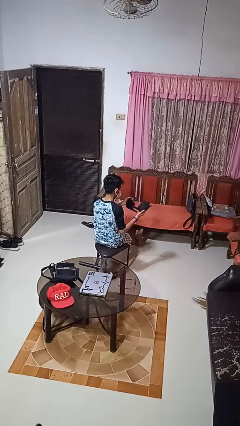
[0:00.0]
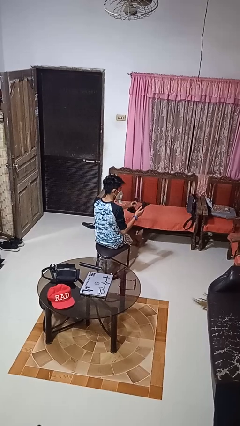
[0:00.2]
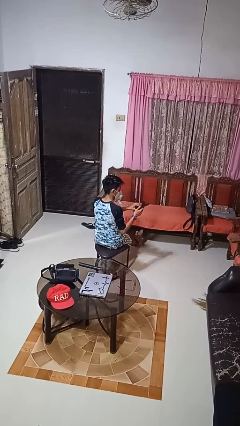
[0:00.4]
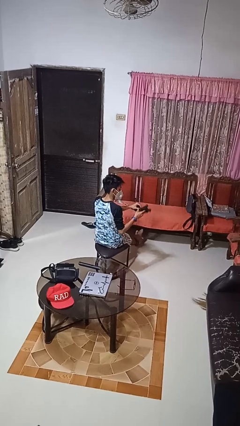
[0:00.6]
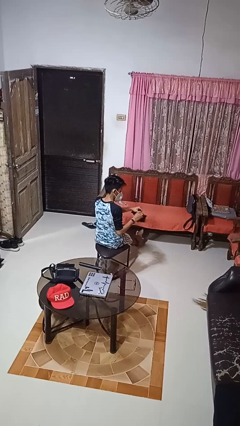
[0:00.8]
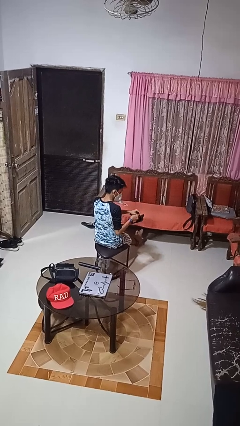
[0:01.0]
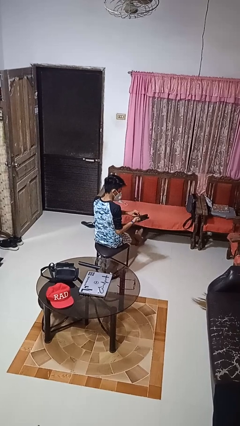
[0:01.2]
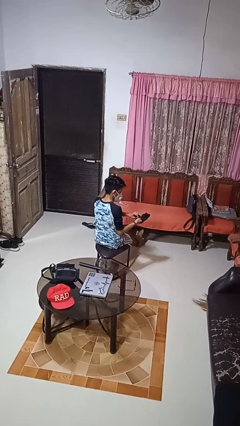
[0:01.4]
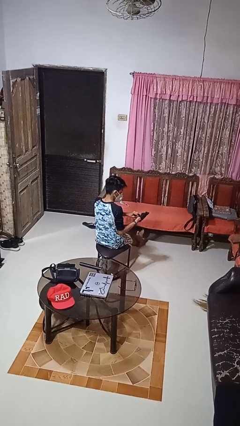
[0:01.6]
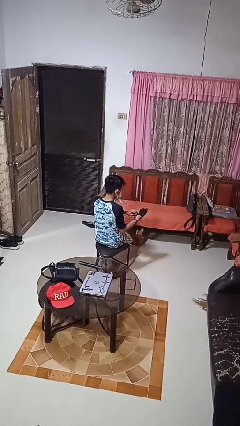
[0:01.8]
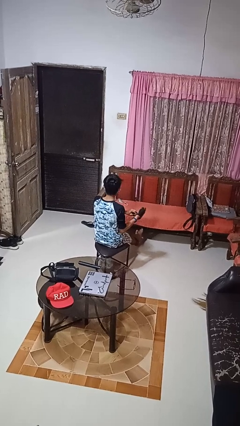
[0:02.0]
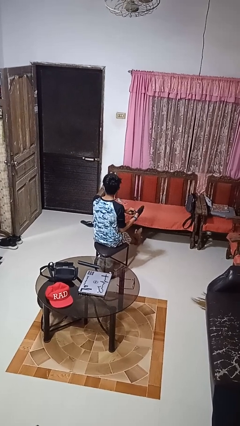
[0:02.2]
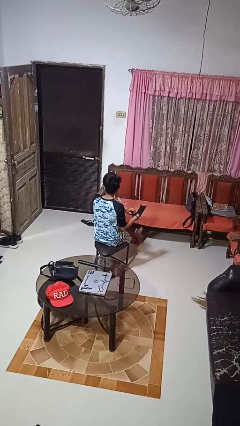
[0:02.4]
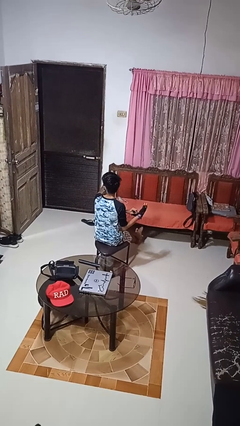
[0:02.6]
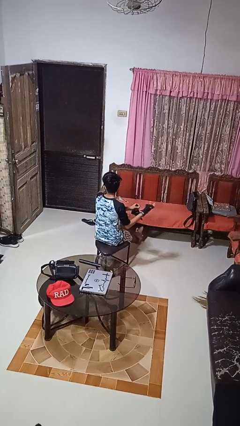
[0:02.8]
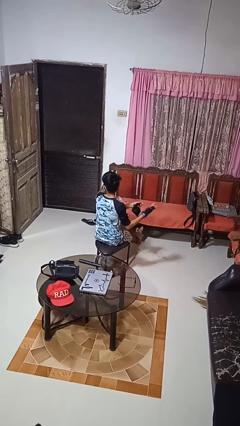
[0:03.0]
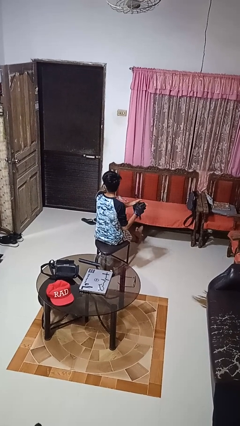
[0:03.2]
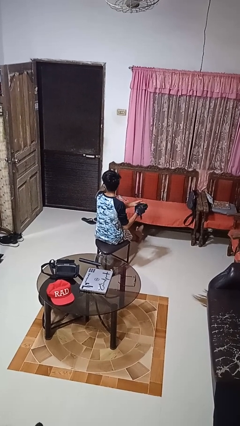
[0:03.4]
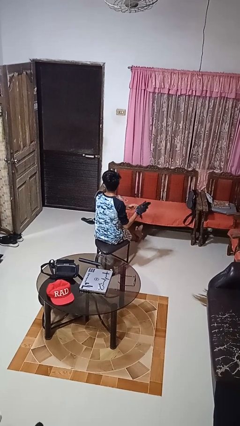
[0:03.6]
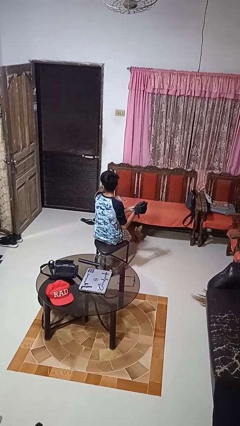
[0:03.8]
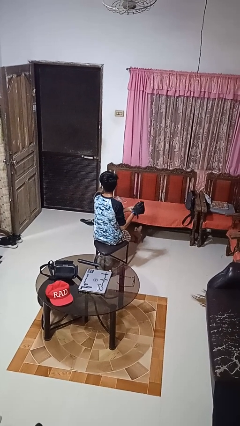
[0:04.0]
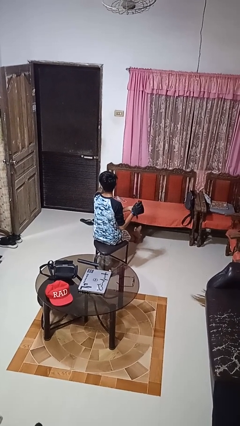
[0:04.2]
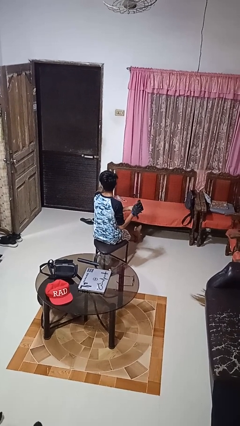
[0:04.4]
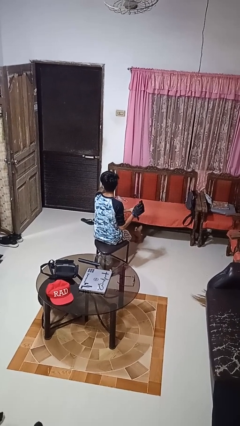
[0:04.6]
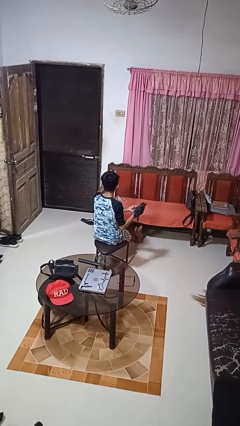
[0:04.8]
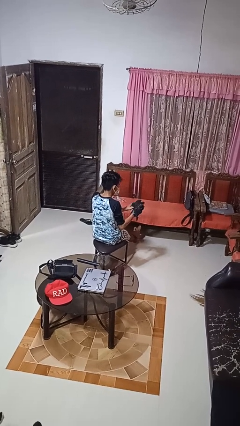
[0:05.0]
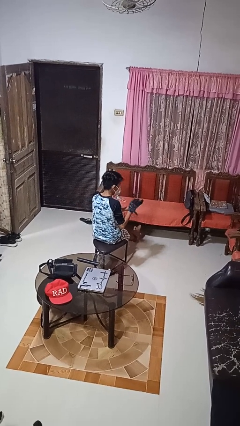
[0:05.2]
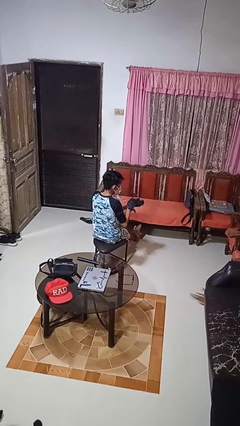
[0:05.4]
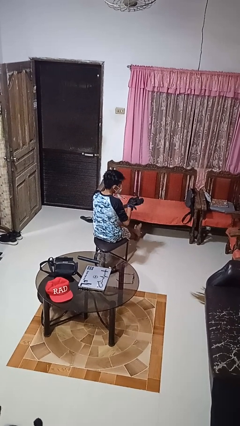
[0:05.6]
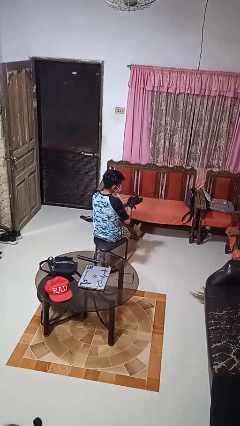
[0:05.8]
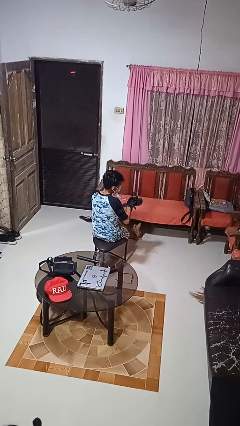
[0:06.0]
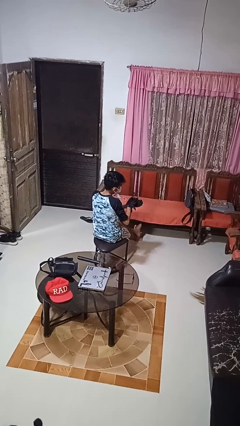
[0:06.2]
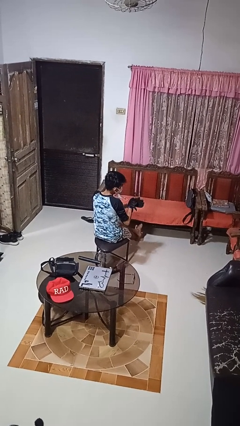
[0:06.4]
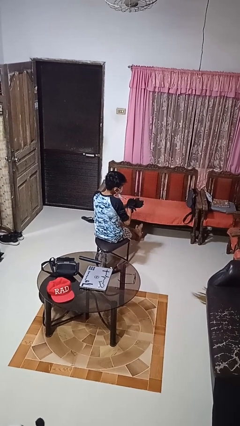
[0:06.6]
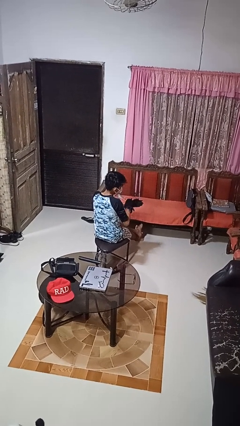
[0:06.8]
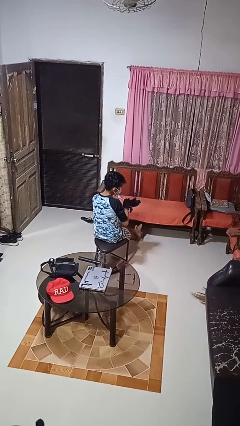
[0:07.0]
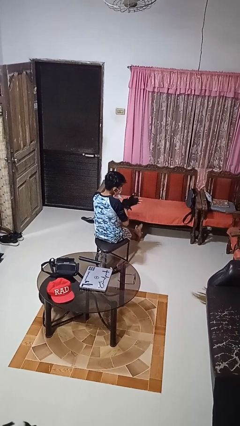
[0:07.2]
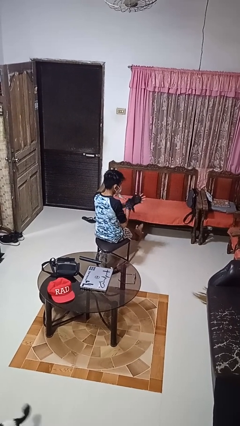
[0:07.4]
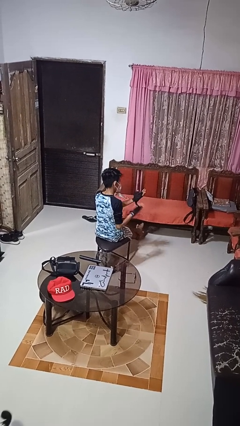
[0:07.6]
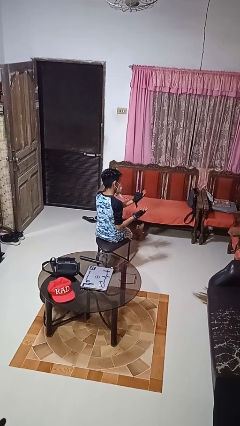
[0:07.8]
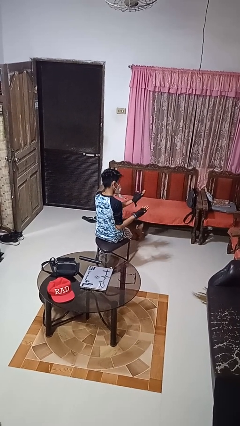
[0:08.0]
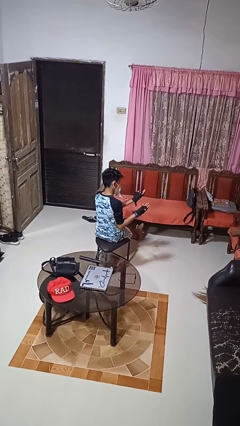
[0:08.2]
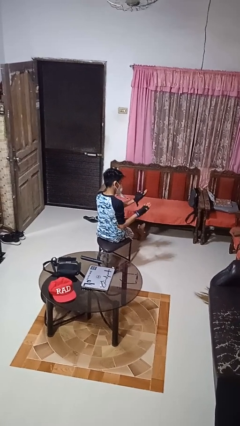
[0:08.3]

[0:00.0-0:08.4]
person puts on gloves

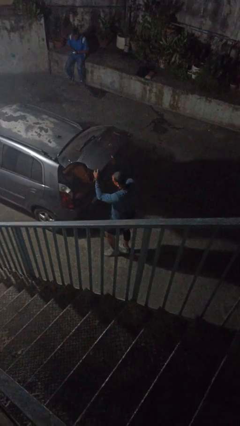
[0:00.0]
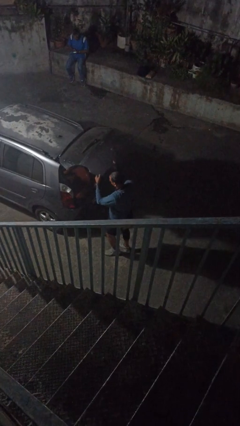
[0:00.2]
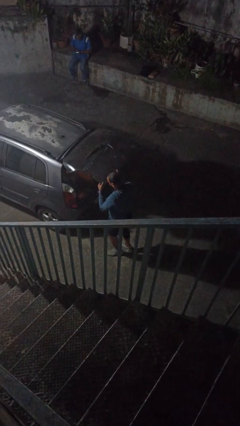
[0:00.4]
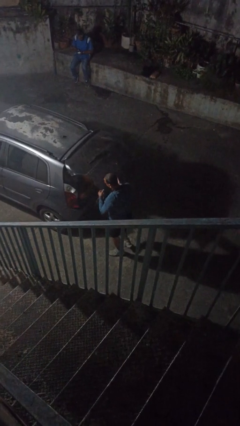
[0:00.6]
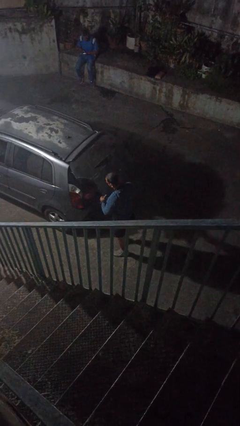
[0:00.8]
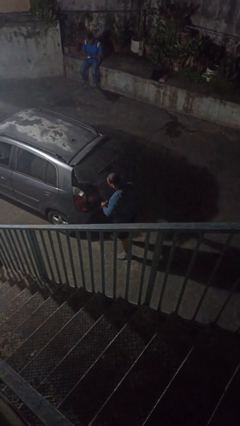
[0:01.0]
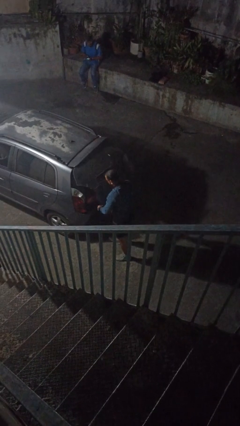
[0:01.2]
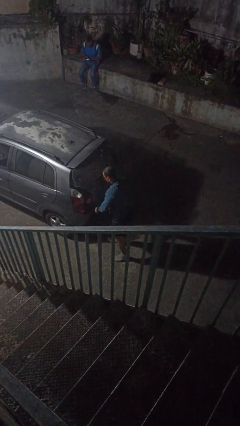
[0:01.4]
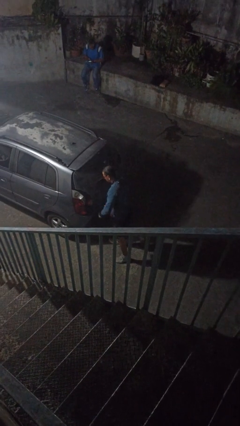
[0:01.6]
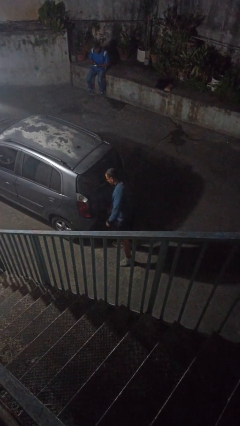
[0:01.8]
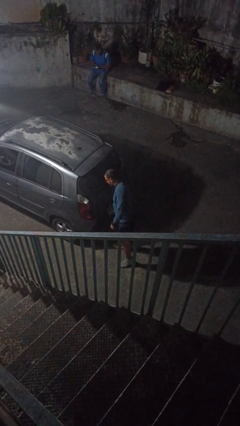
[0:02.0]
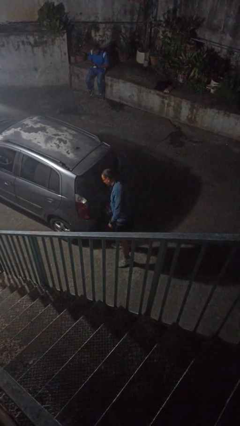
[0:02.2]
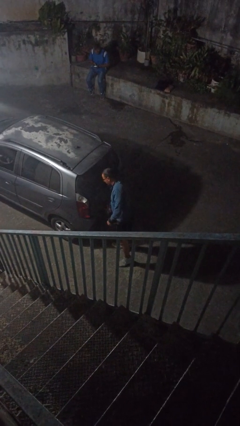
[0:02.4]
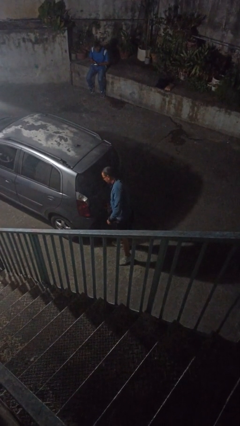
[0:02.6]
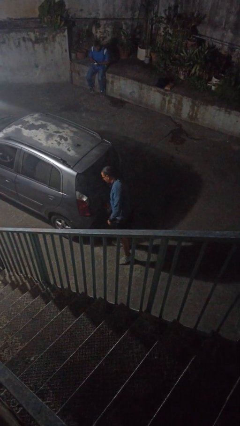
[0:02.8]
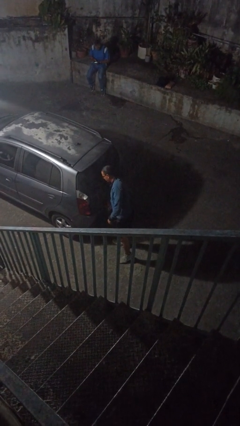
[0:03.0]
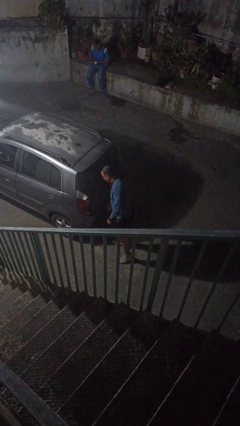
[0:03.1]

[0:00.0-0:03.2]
person closes car trunk

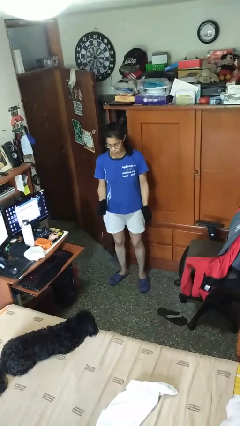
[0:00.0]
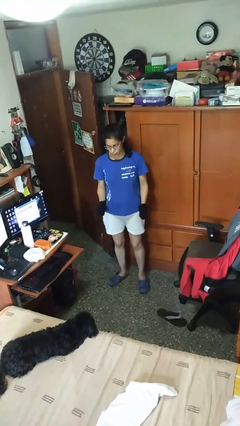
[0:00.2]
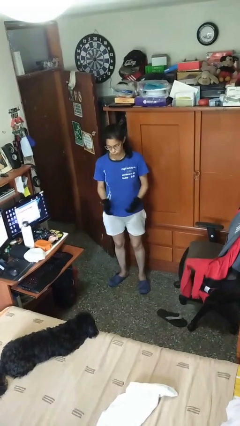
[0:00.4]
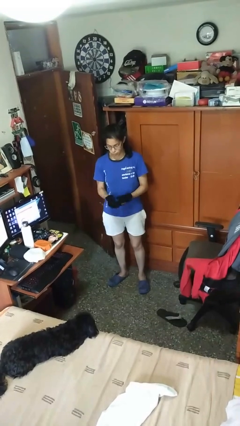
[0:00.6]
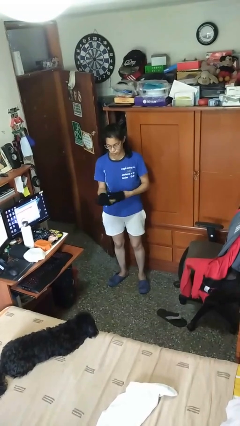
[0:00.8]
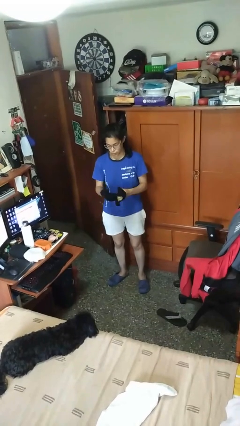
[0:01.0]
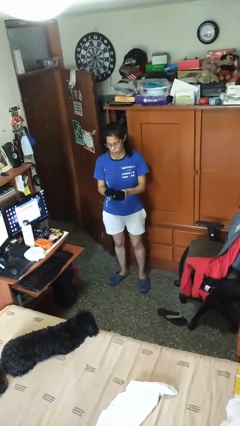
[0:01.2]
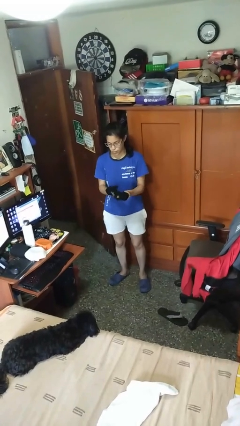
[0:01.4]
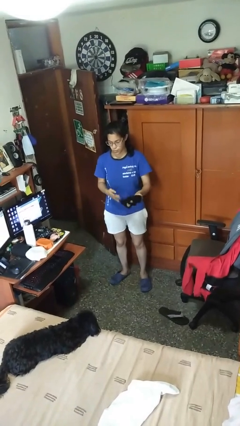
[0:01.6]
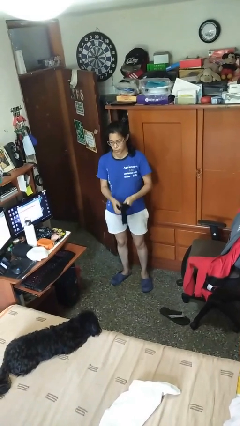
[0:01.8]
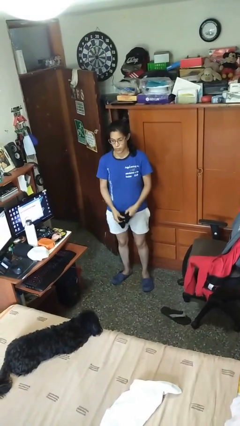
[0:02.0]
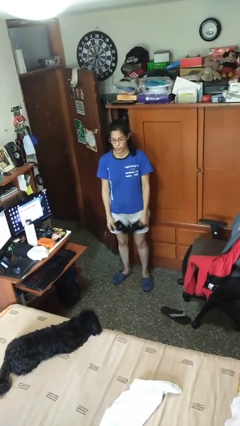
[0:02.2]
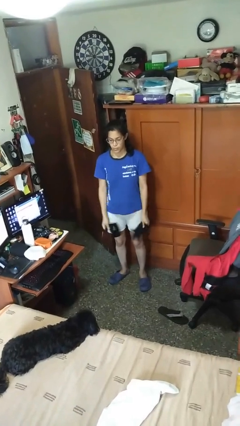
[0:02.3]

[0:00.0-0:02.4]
person takes off gloves

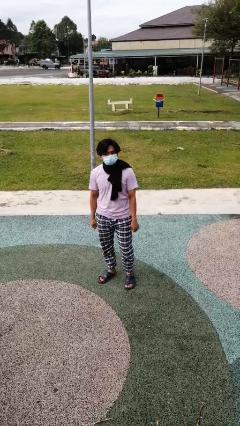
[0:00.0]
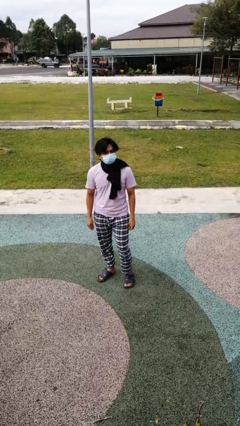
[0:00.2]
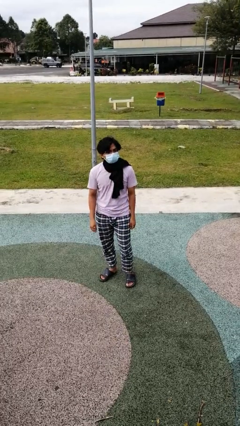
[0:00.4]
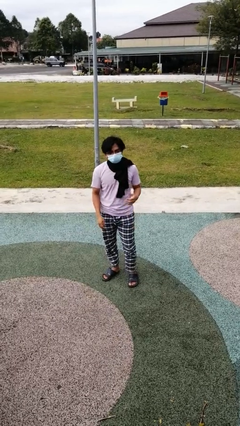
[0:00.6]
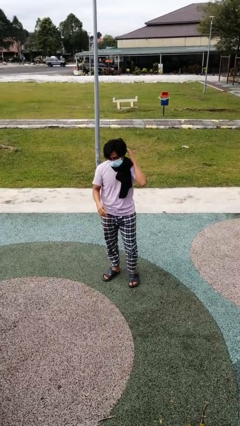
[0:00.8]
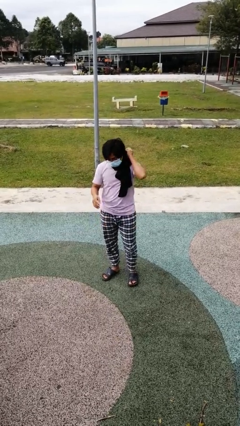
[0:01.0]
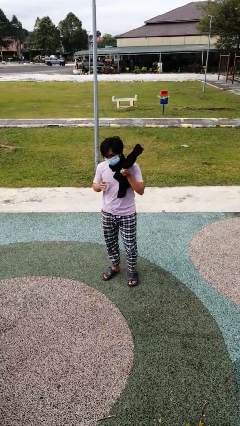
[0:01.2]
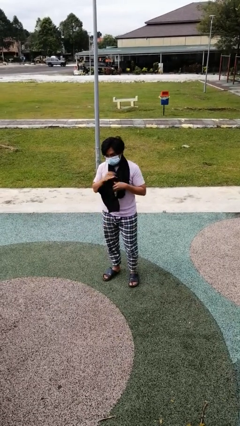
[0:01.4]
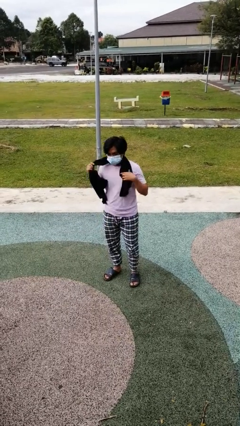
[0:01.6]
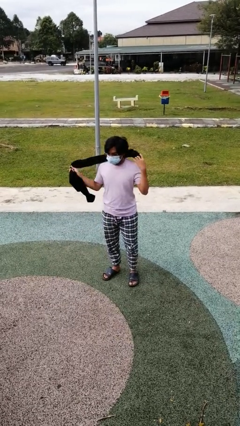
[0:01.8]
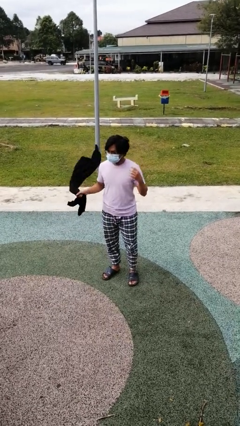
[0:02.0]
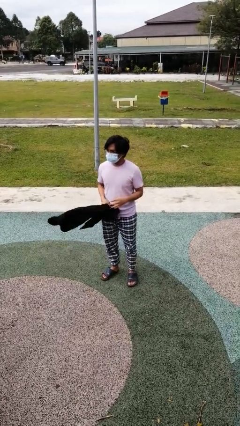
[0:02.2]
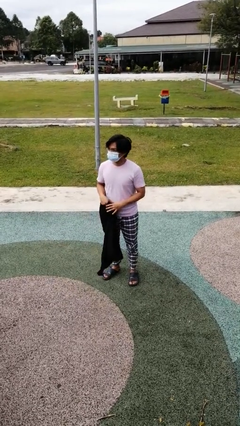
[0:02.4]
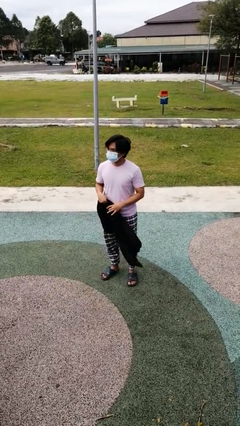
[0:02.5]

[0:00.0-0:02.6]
person takes off scarf

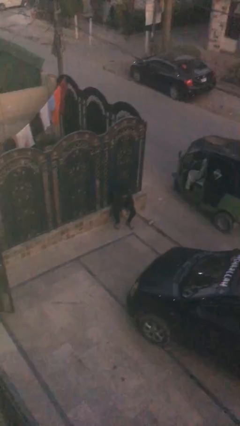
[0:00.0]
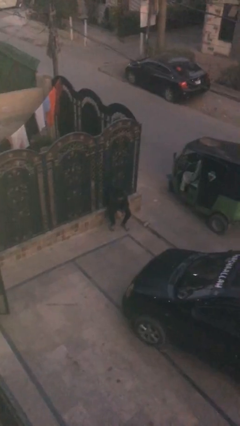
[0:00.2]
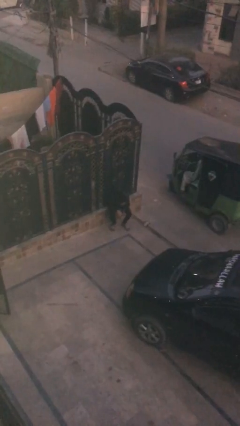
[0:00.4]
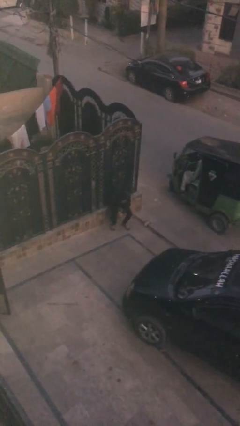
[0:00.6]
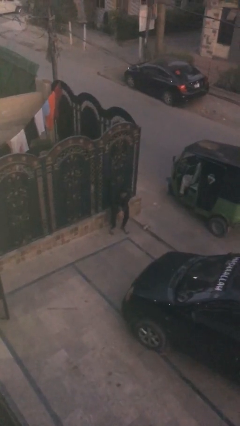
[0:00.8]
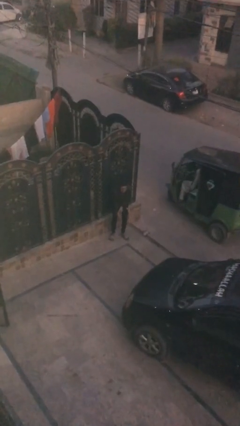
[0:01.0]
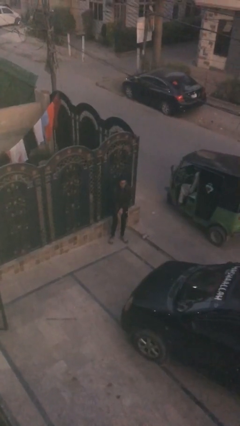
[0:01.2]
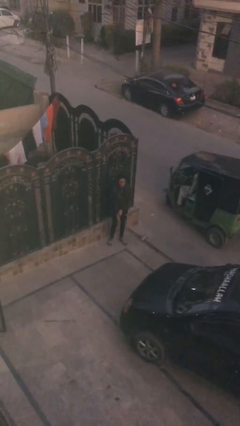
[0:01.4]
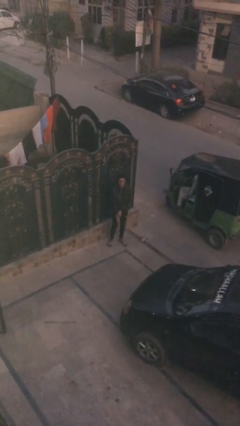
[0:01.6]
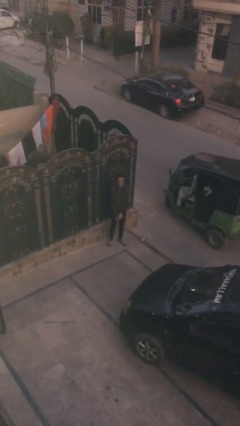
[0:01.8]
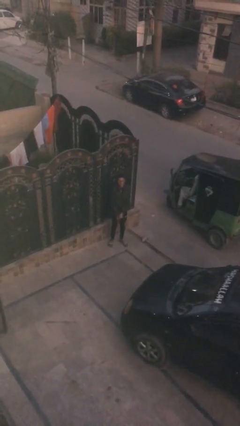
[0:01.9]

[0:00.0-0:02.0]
person stands up
